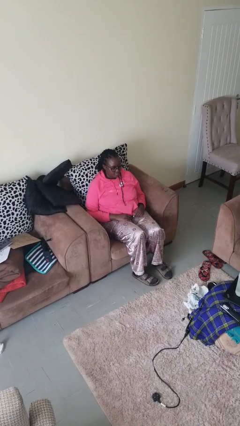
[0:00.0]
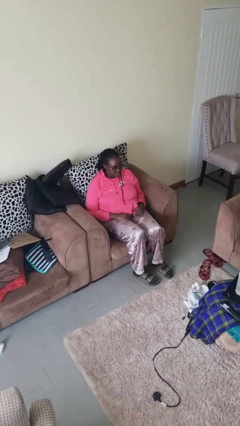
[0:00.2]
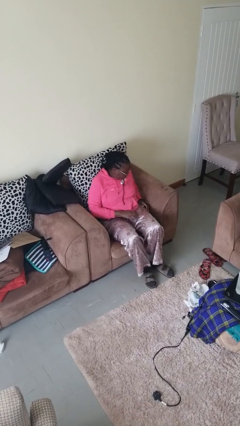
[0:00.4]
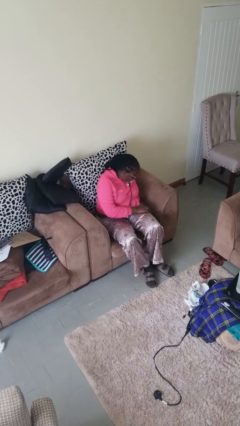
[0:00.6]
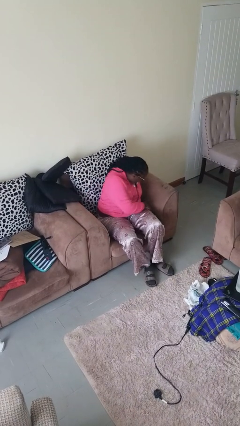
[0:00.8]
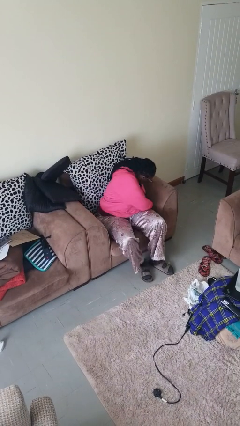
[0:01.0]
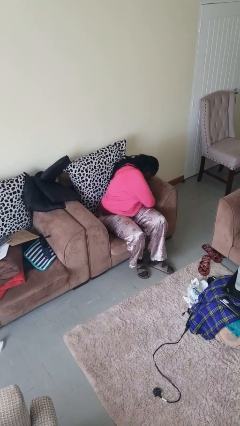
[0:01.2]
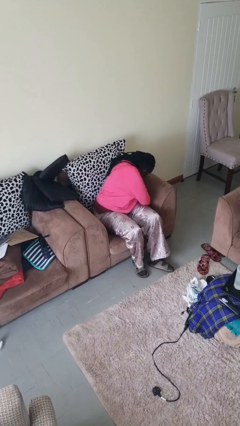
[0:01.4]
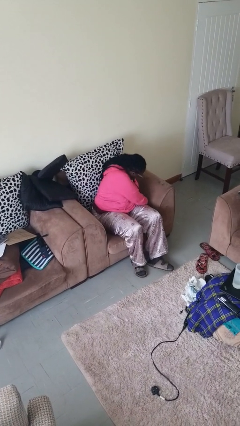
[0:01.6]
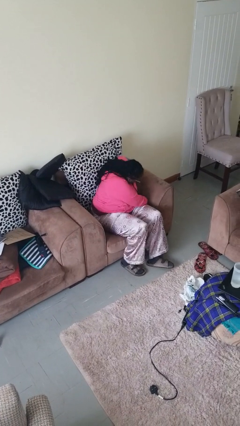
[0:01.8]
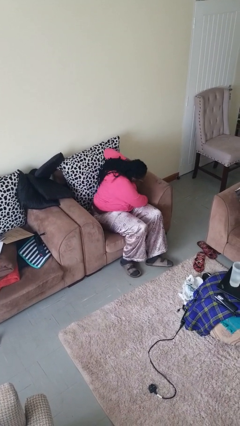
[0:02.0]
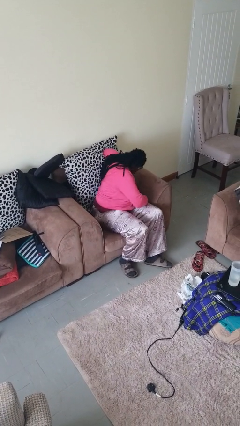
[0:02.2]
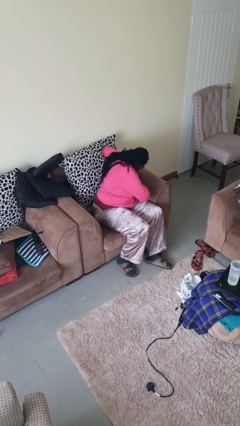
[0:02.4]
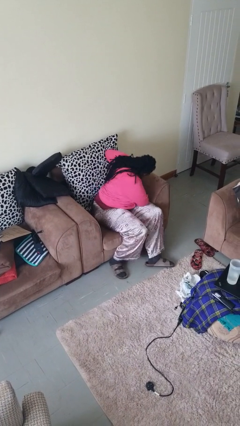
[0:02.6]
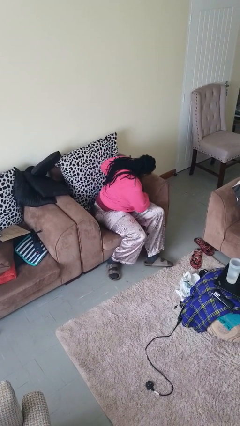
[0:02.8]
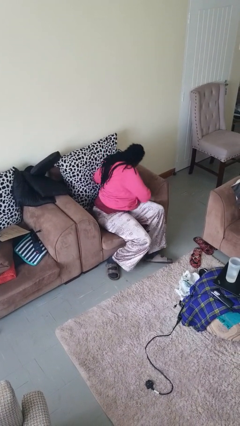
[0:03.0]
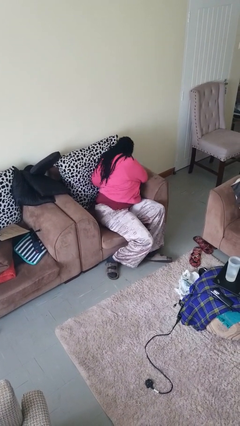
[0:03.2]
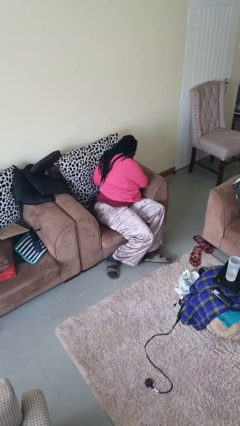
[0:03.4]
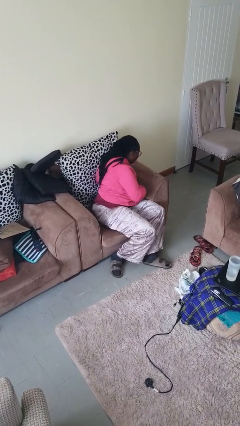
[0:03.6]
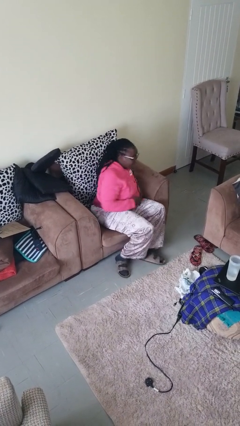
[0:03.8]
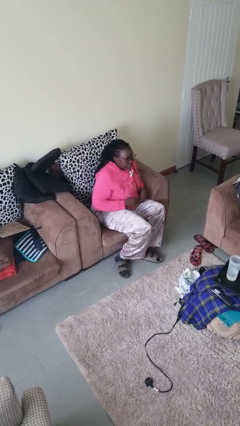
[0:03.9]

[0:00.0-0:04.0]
person searches in couch

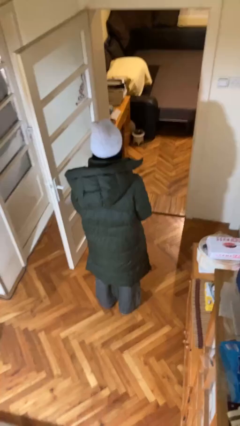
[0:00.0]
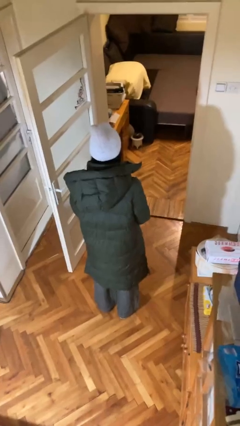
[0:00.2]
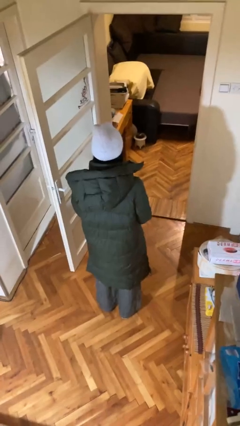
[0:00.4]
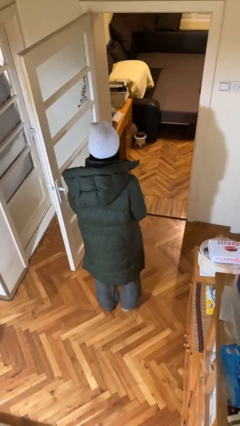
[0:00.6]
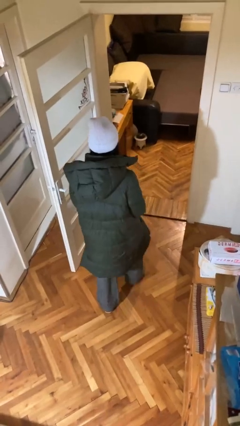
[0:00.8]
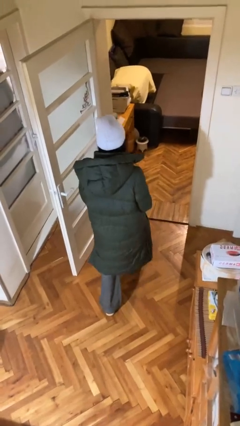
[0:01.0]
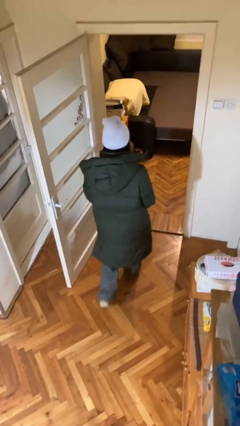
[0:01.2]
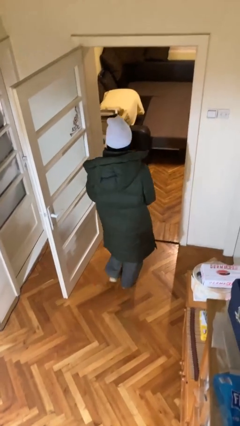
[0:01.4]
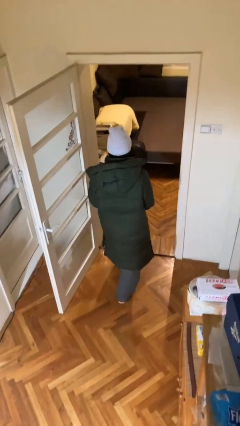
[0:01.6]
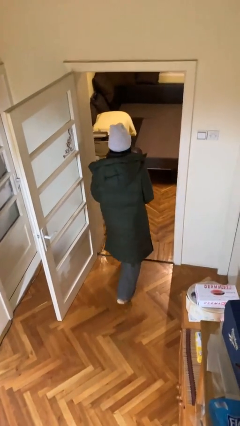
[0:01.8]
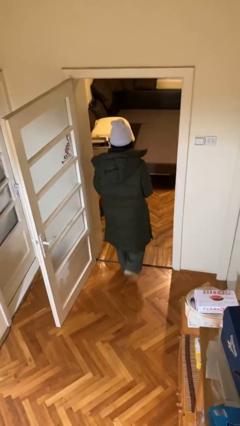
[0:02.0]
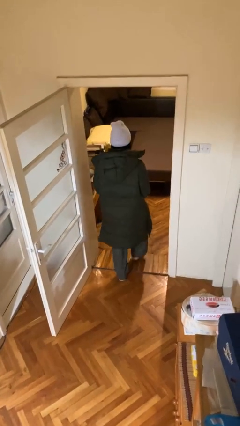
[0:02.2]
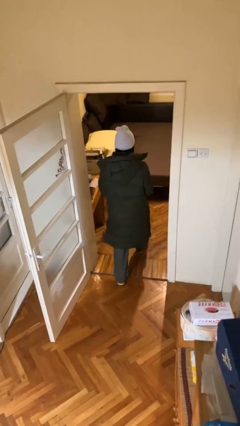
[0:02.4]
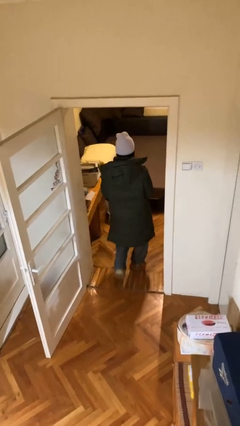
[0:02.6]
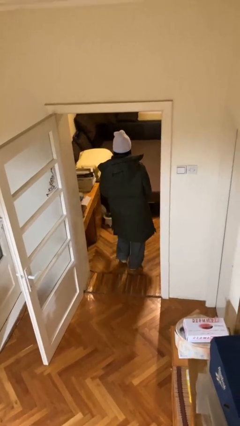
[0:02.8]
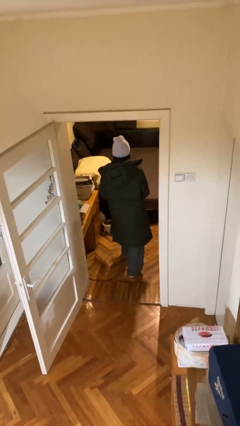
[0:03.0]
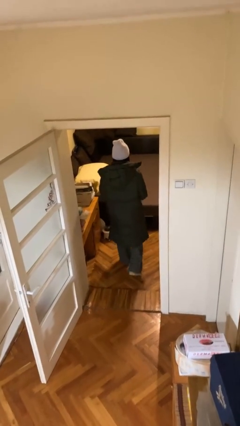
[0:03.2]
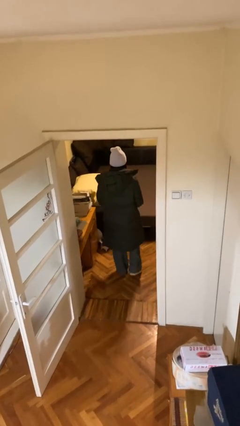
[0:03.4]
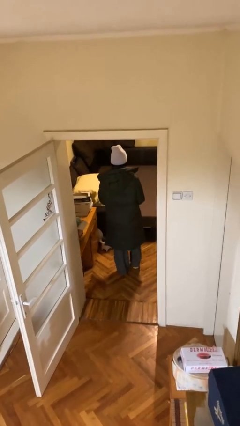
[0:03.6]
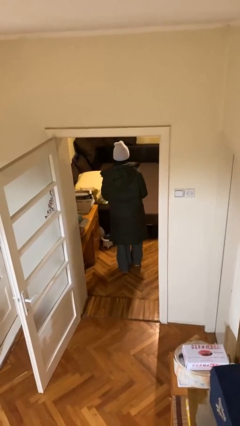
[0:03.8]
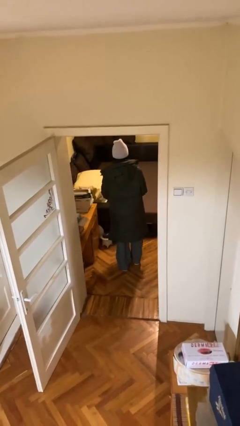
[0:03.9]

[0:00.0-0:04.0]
person exits scene through structure

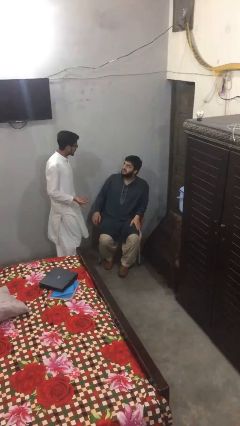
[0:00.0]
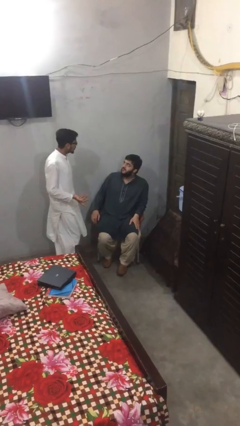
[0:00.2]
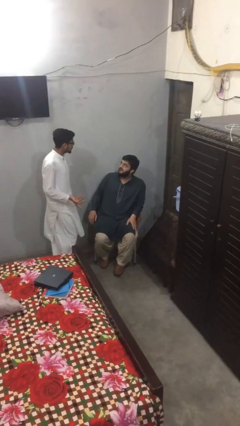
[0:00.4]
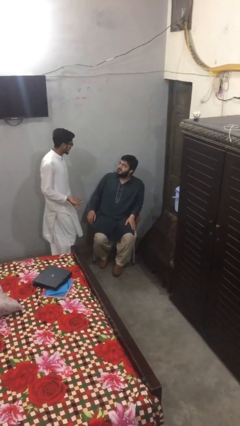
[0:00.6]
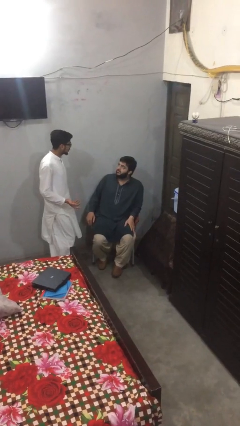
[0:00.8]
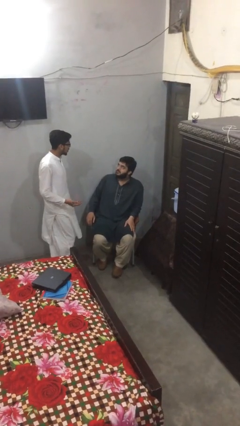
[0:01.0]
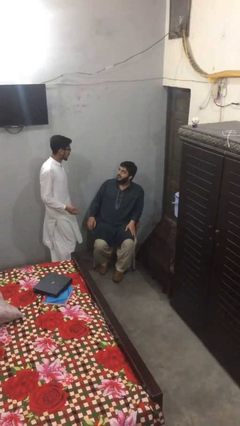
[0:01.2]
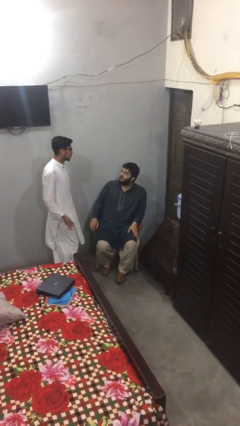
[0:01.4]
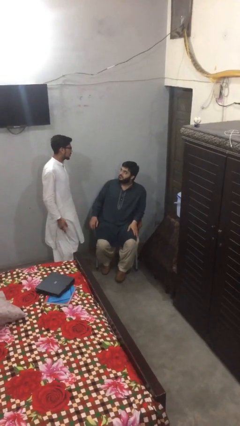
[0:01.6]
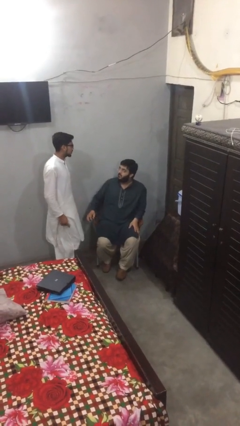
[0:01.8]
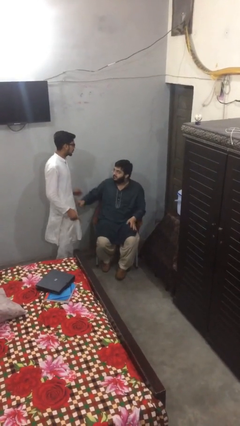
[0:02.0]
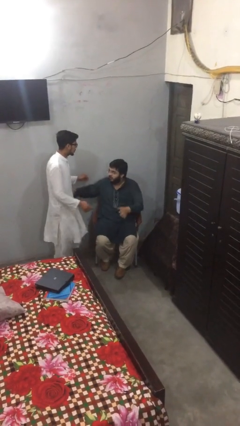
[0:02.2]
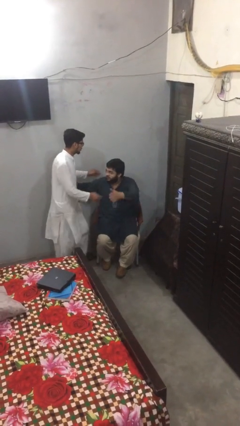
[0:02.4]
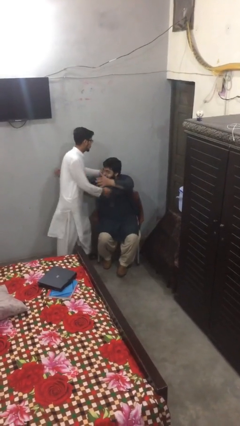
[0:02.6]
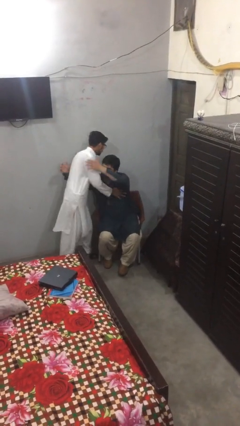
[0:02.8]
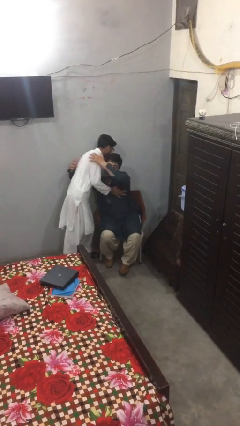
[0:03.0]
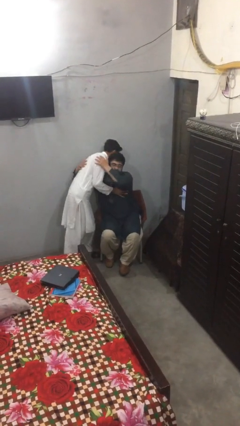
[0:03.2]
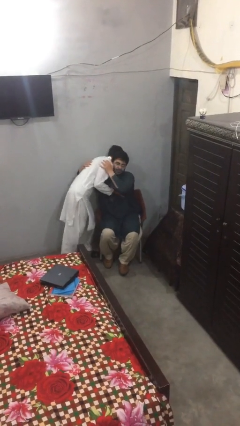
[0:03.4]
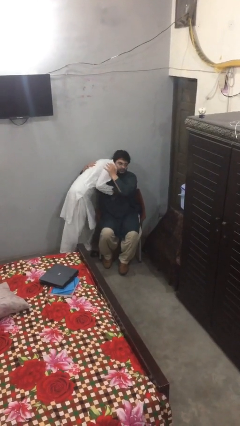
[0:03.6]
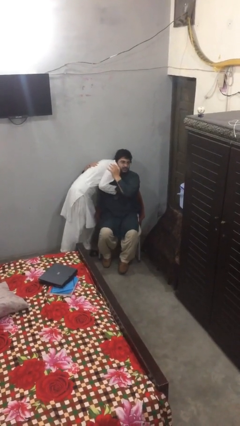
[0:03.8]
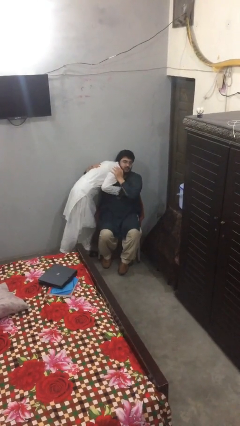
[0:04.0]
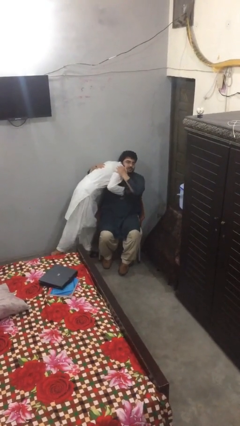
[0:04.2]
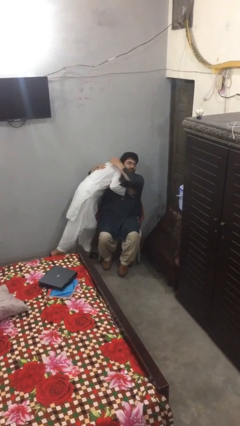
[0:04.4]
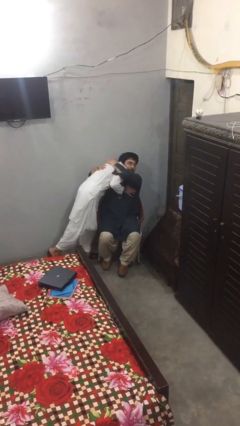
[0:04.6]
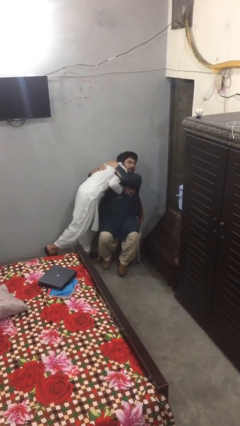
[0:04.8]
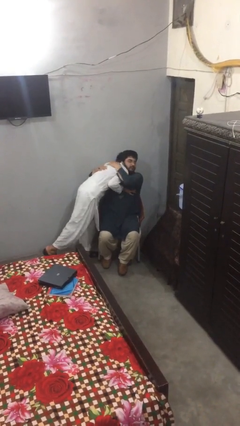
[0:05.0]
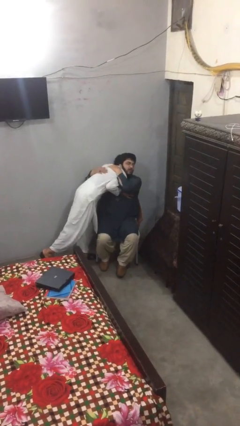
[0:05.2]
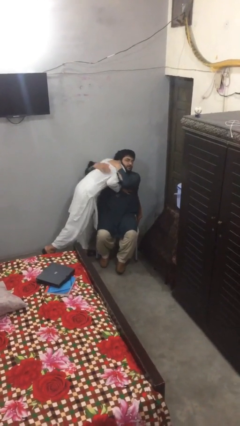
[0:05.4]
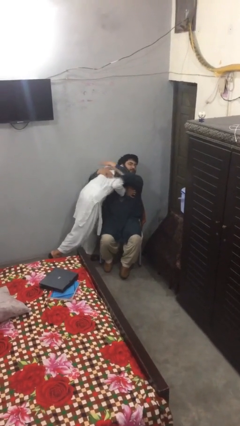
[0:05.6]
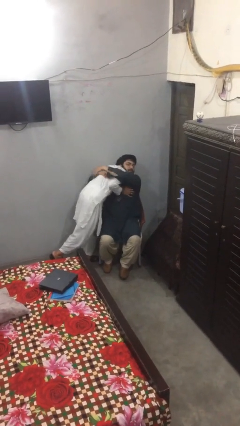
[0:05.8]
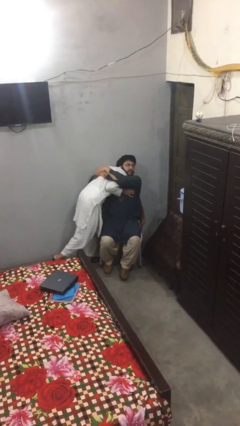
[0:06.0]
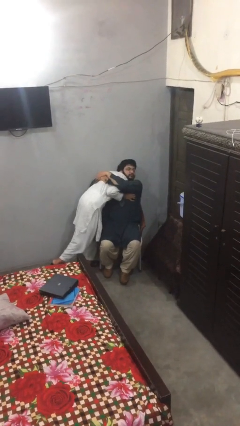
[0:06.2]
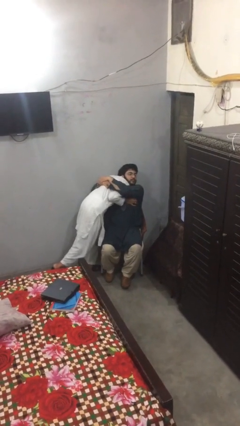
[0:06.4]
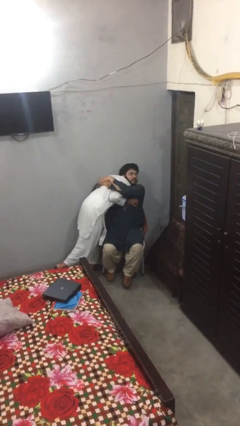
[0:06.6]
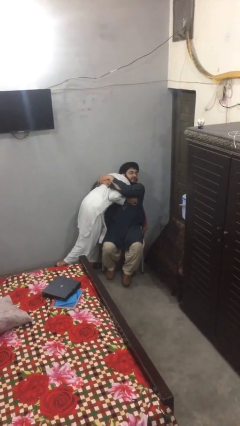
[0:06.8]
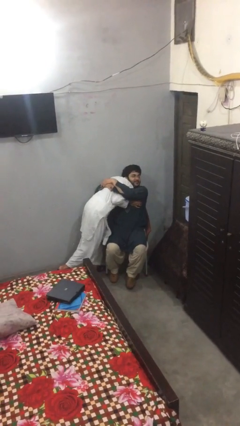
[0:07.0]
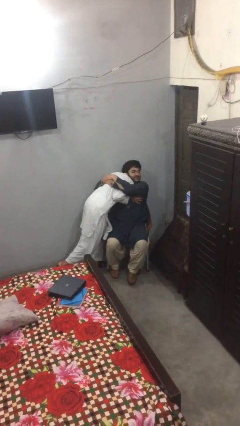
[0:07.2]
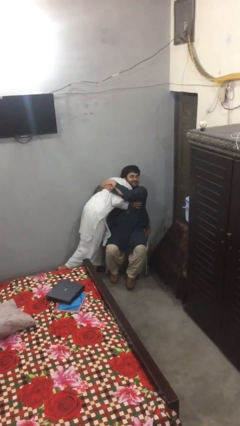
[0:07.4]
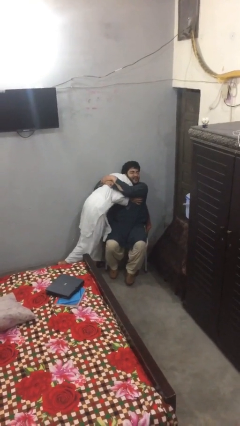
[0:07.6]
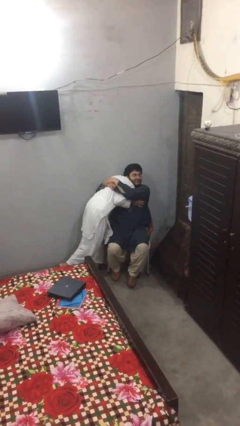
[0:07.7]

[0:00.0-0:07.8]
person embraces person

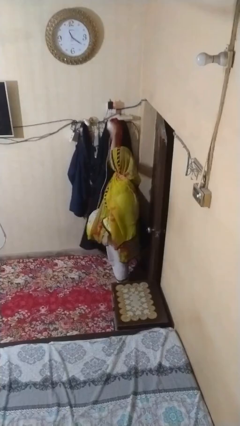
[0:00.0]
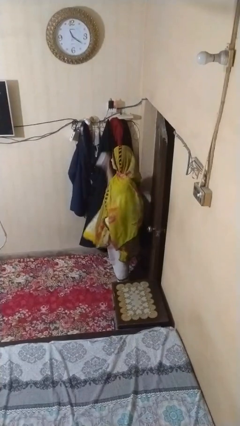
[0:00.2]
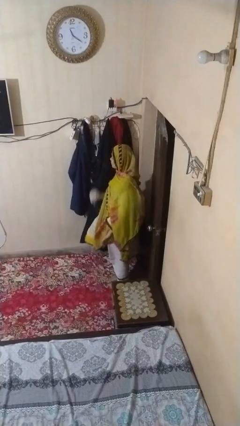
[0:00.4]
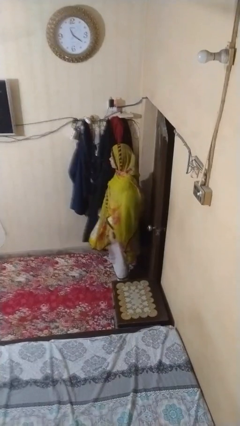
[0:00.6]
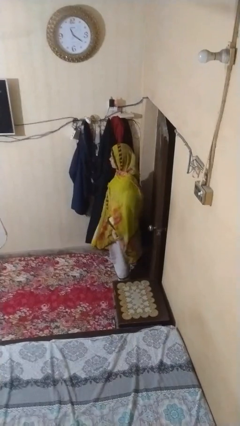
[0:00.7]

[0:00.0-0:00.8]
person unplugs from electrical socket

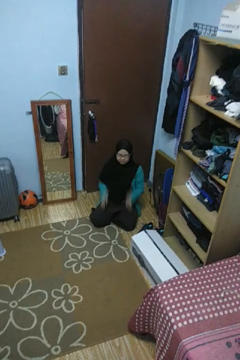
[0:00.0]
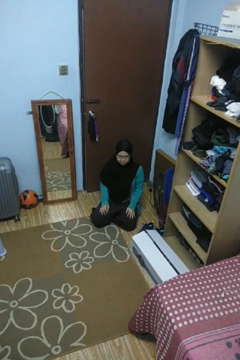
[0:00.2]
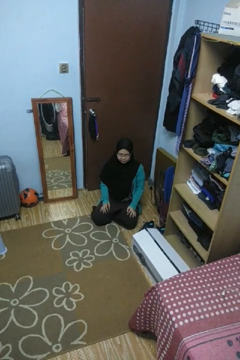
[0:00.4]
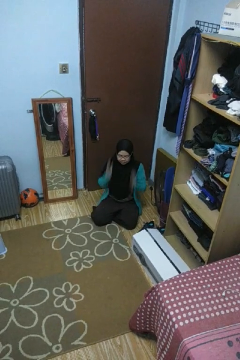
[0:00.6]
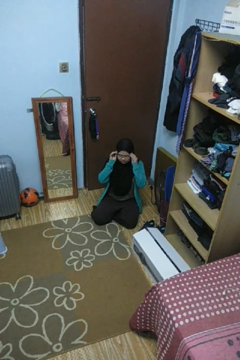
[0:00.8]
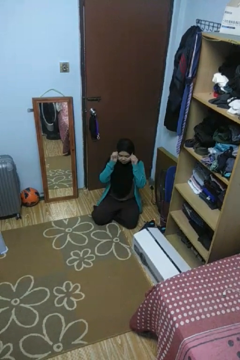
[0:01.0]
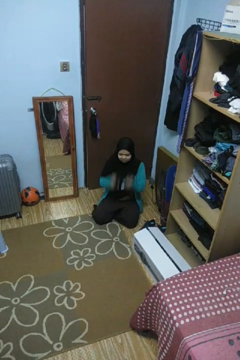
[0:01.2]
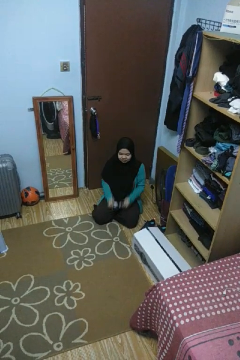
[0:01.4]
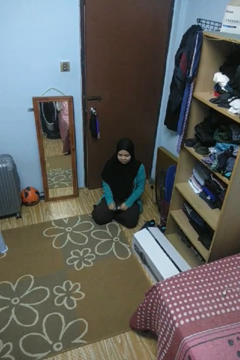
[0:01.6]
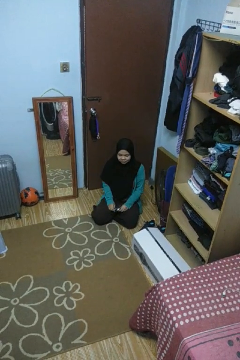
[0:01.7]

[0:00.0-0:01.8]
person takes off glasses
